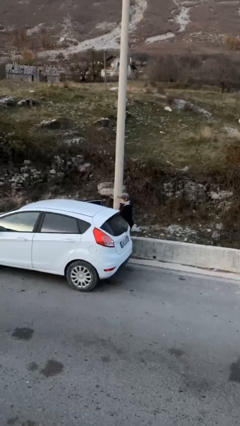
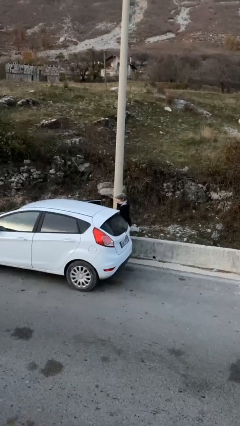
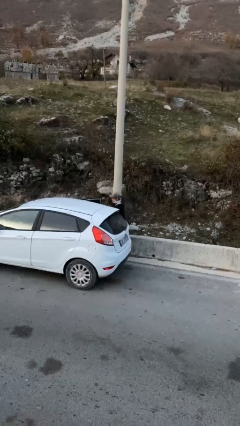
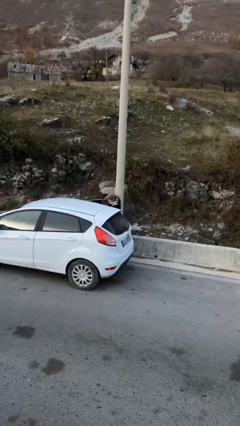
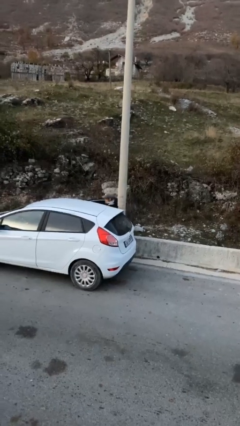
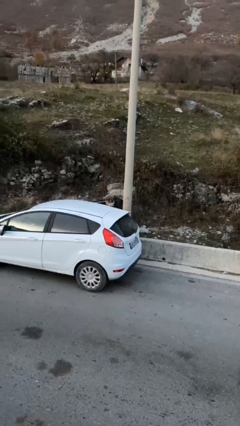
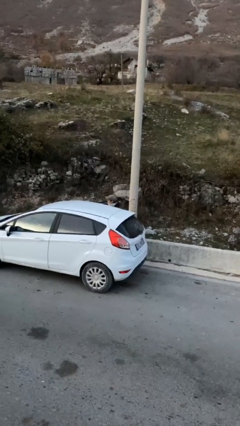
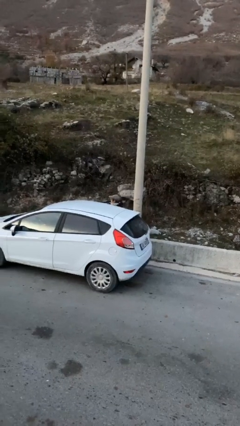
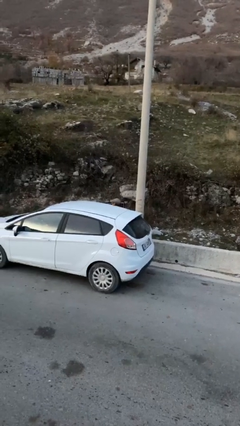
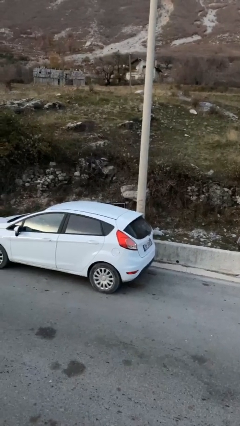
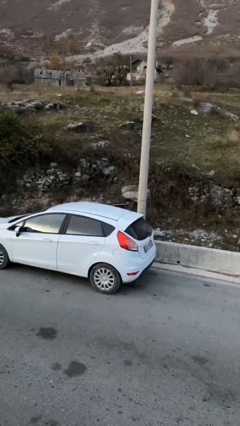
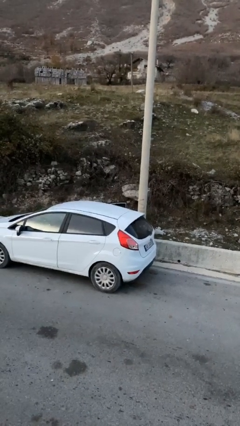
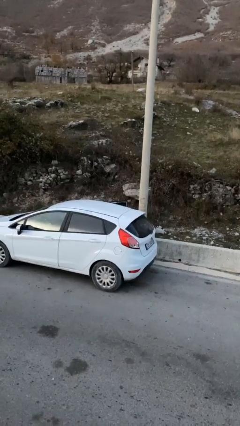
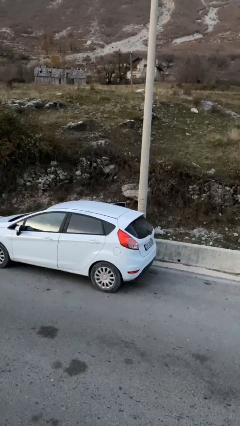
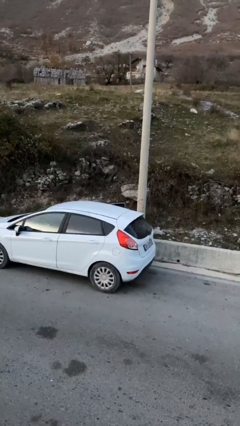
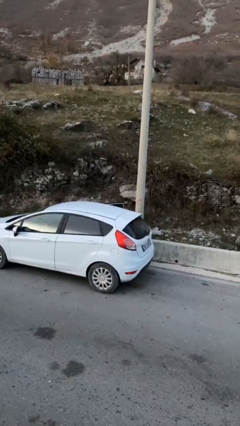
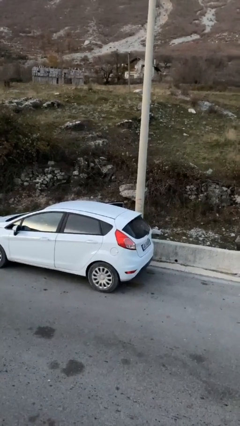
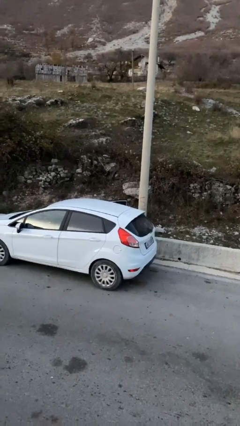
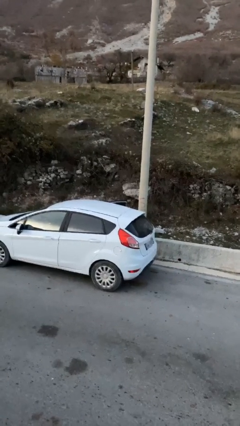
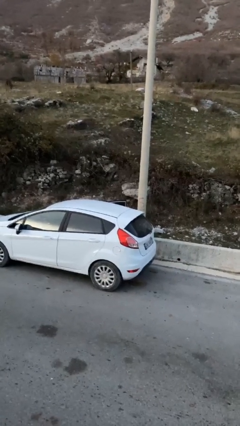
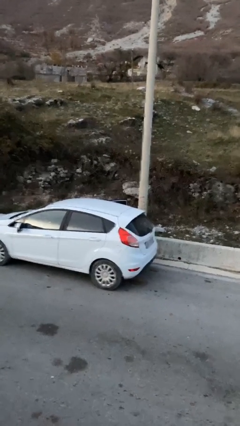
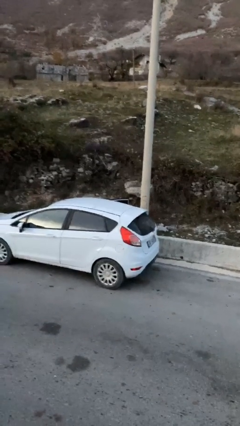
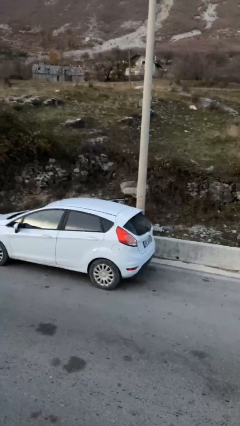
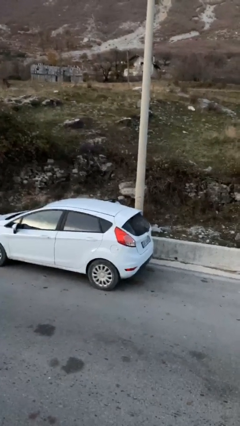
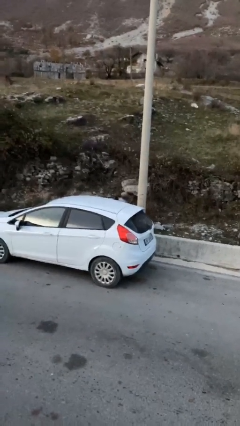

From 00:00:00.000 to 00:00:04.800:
person enters car

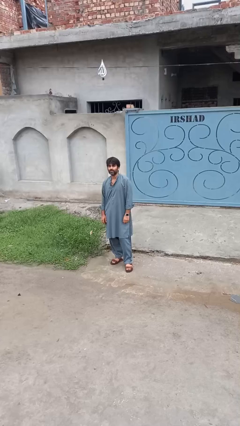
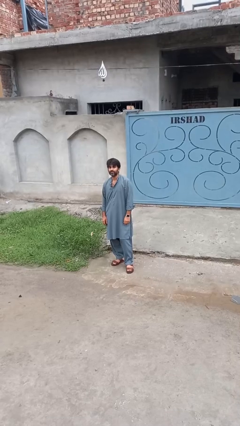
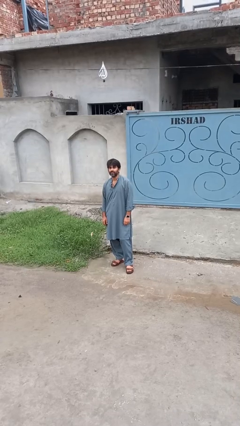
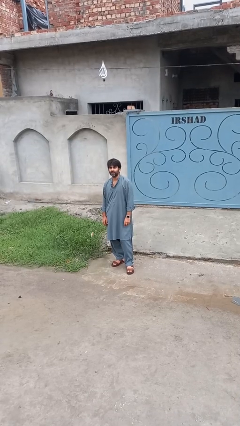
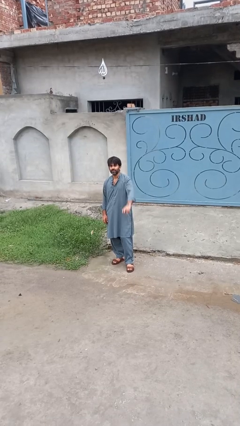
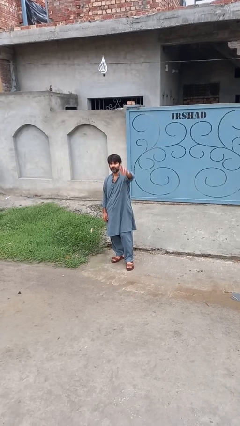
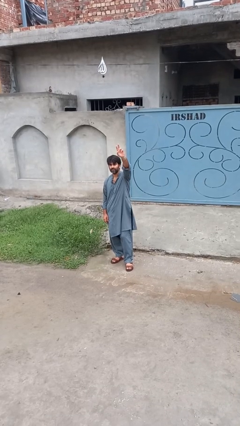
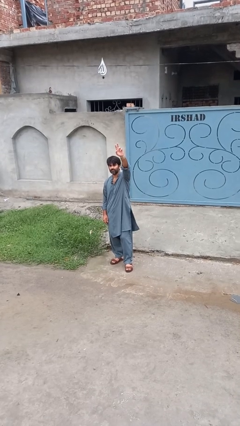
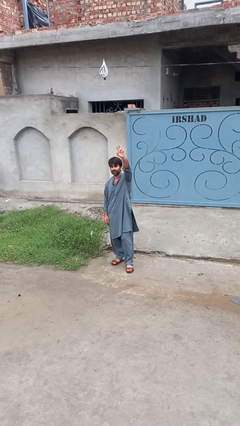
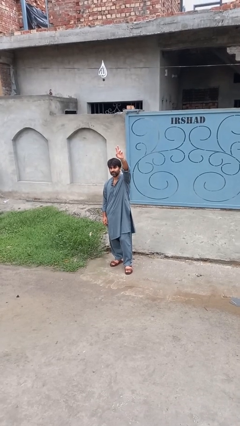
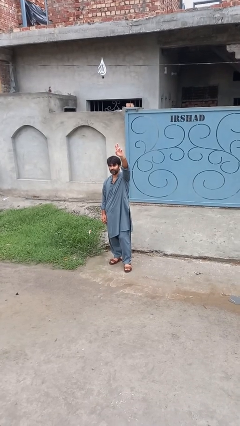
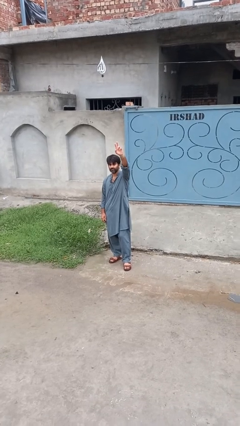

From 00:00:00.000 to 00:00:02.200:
person gestures raise hand

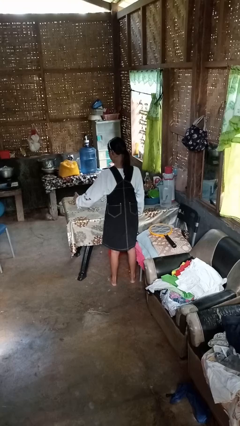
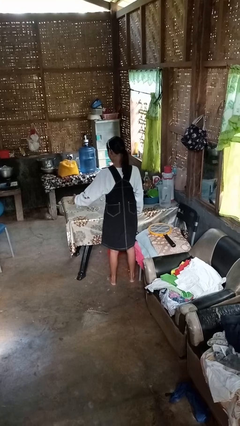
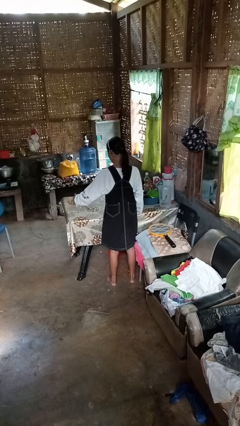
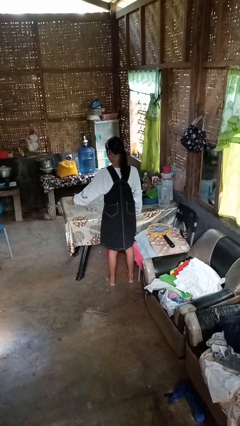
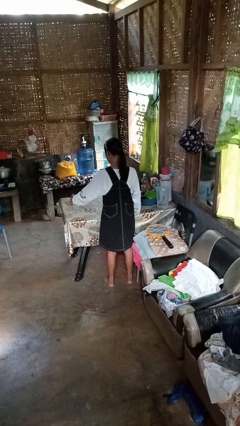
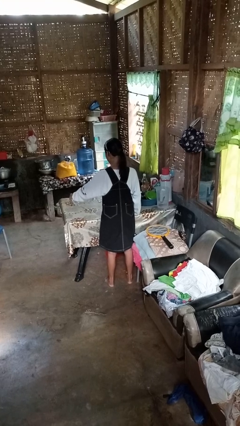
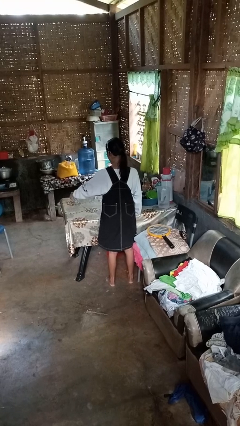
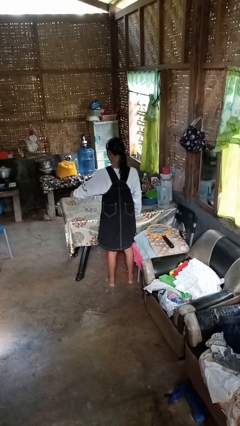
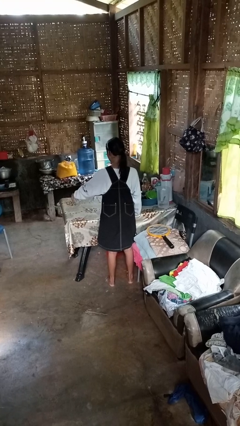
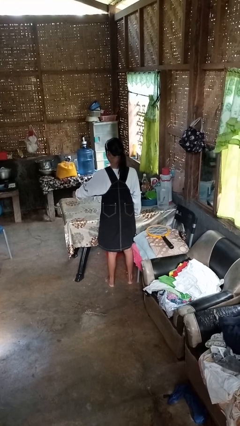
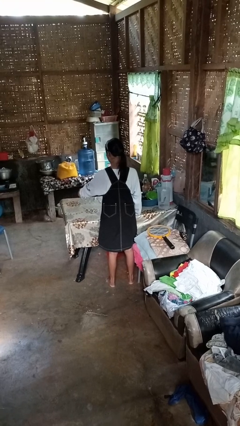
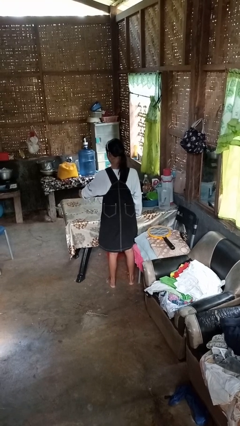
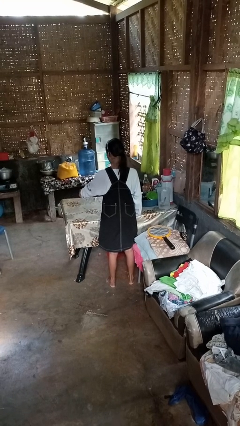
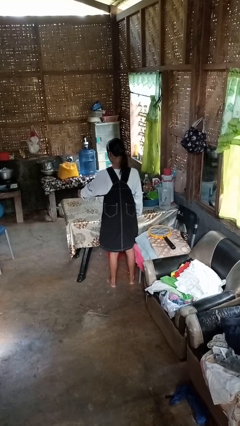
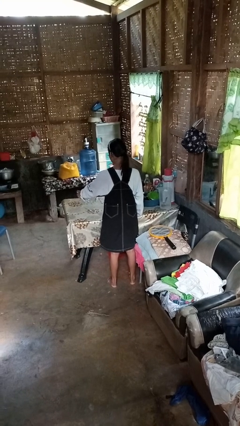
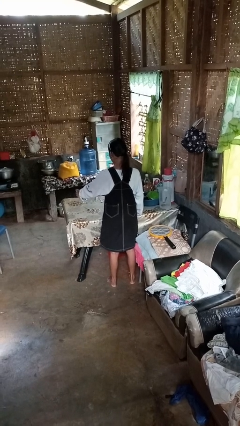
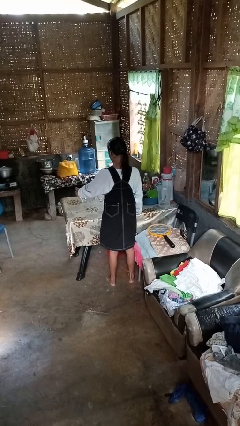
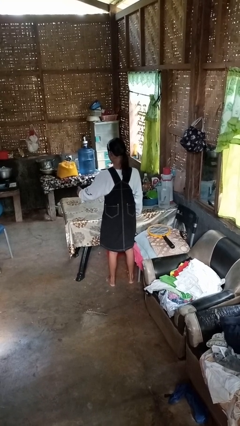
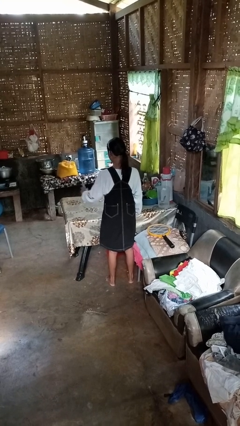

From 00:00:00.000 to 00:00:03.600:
person sprays from bottle

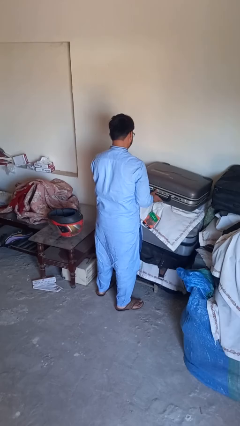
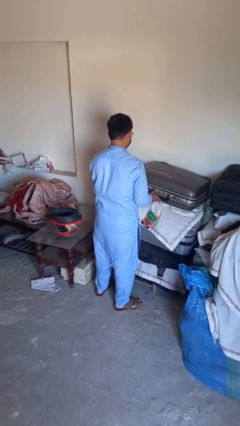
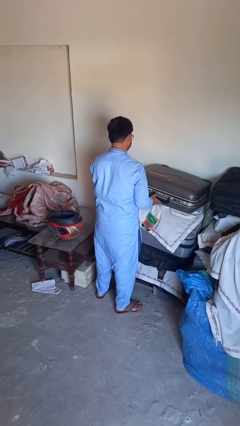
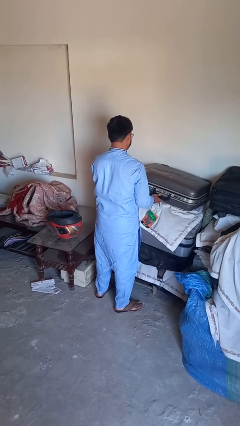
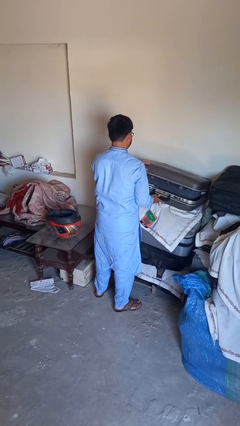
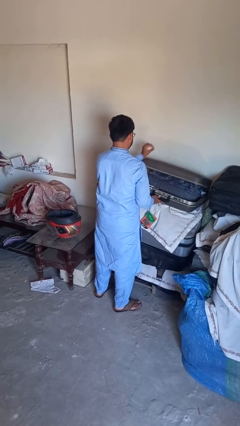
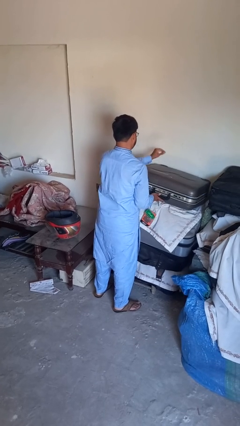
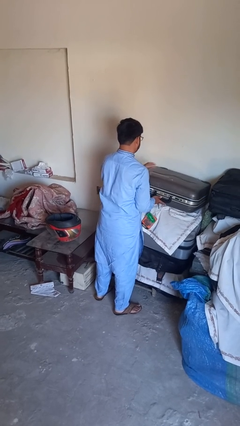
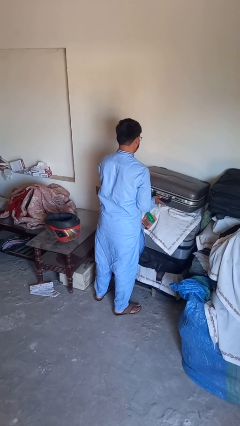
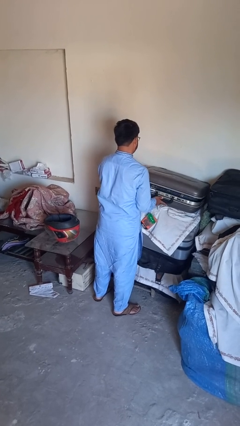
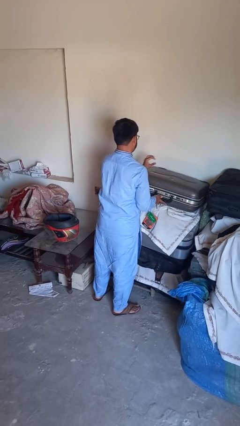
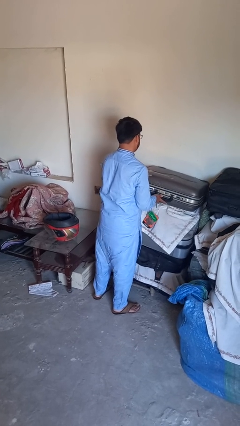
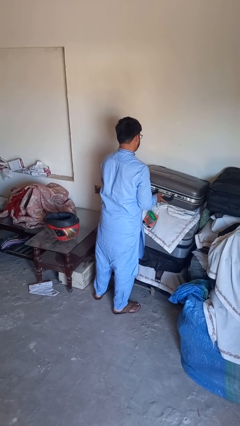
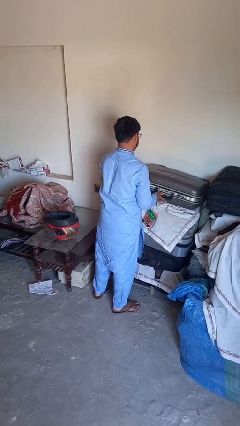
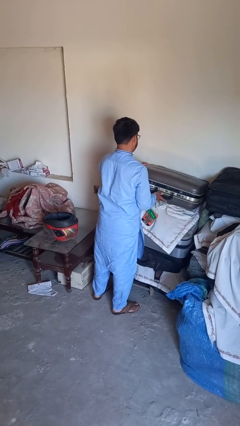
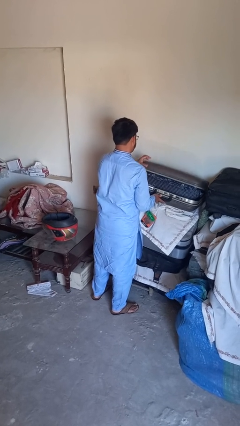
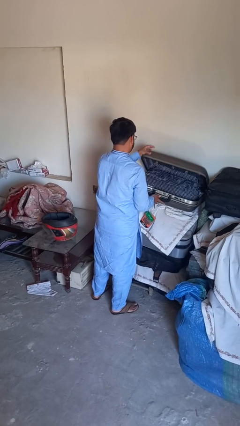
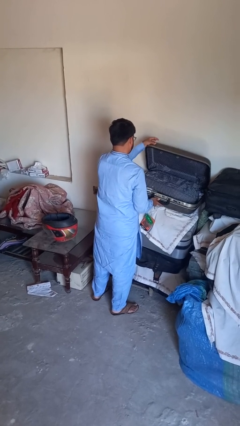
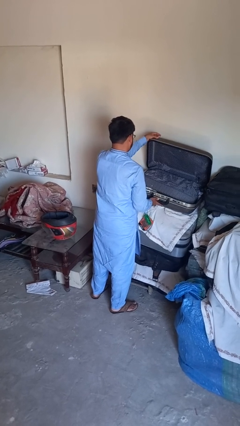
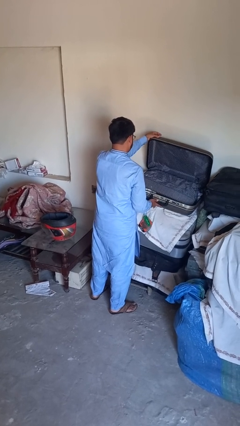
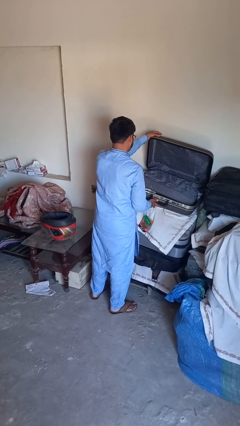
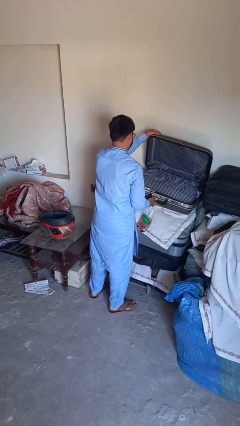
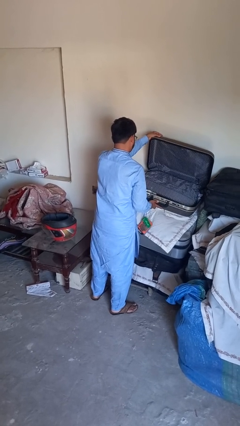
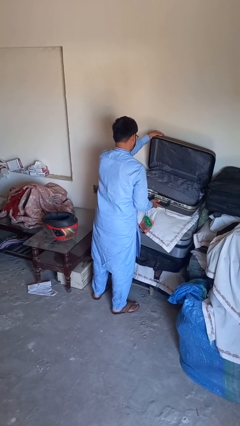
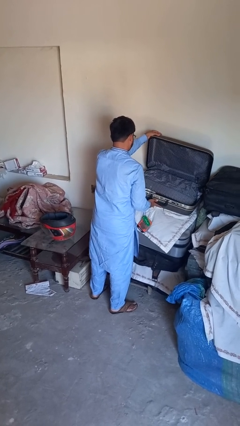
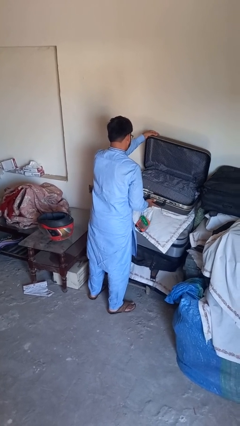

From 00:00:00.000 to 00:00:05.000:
person opens suitcase

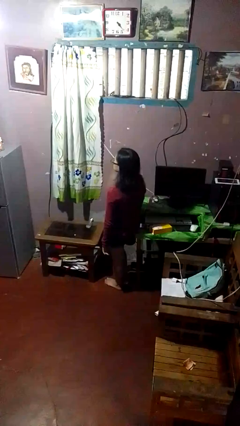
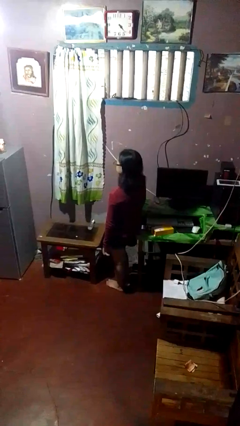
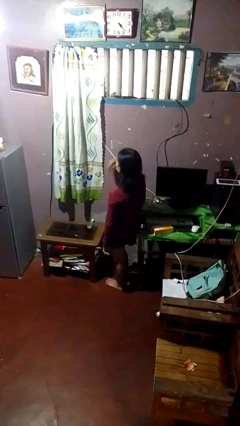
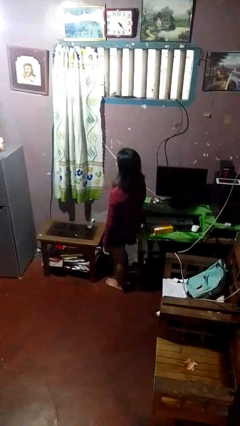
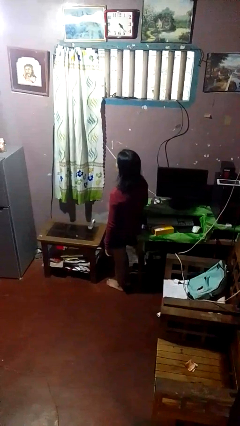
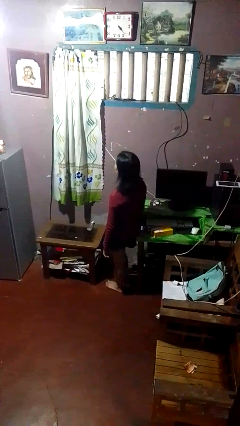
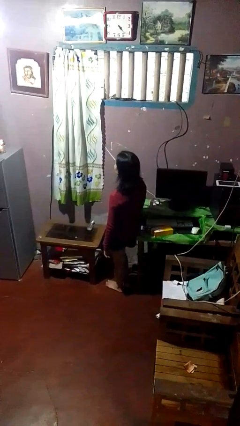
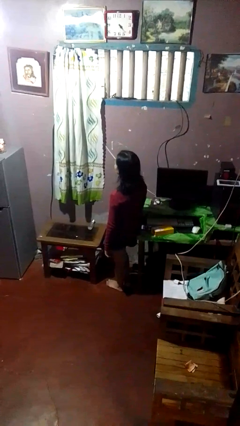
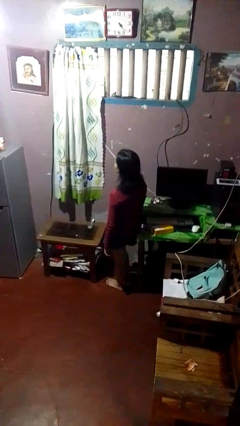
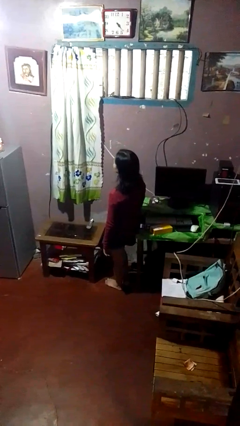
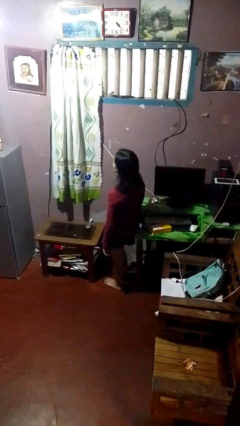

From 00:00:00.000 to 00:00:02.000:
person takes off glasses

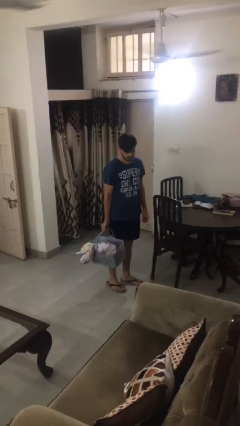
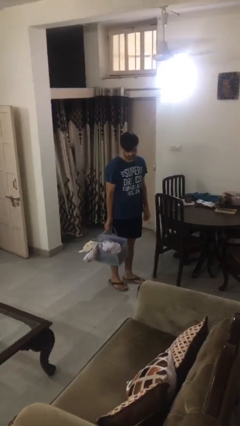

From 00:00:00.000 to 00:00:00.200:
person carries laundry basket
